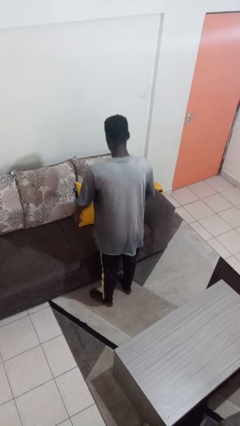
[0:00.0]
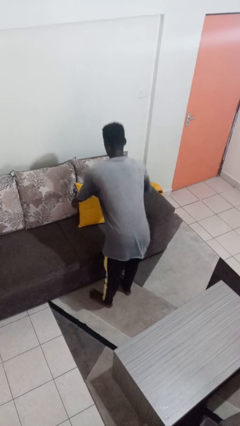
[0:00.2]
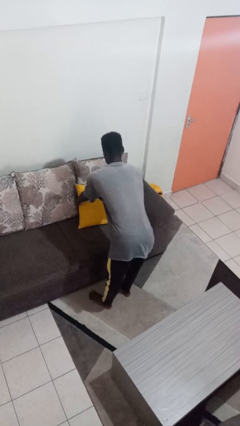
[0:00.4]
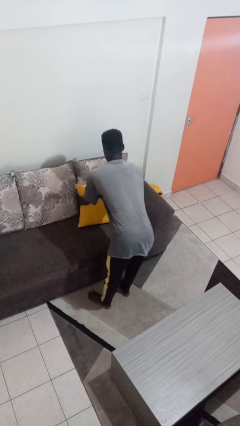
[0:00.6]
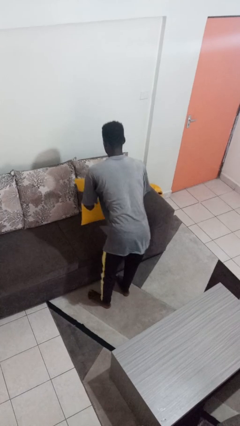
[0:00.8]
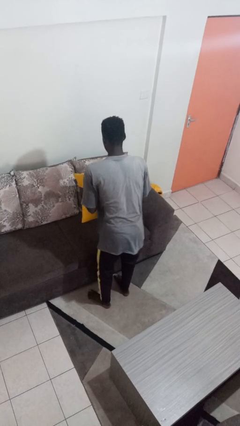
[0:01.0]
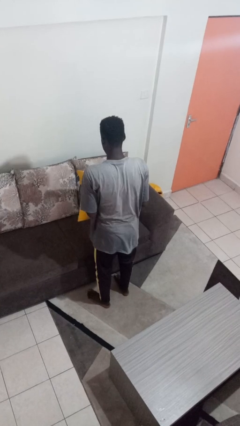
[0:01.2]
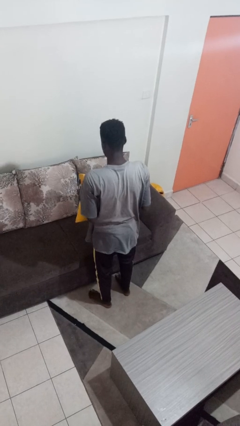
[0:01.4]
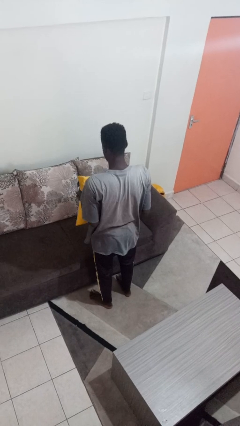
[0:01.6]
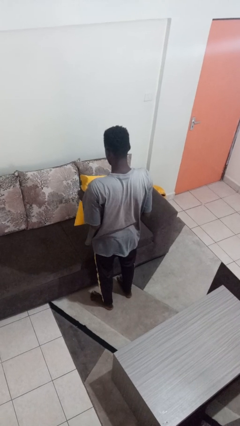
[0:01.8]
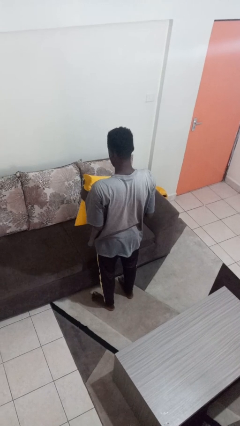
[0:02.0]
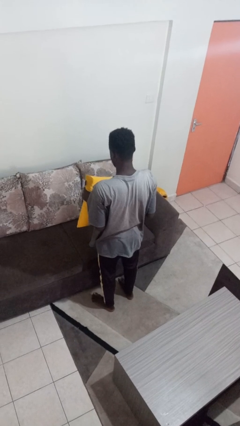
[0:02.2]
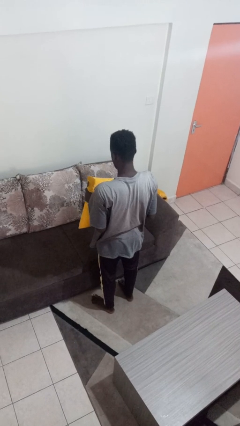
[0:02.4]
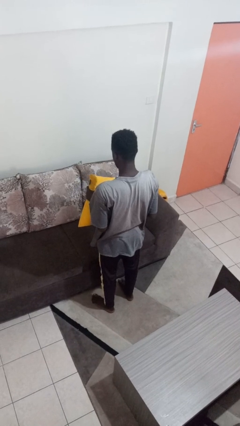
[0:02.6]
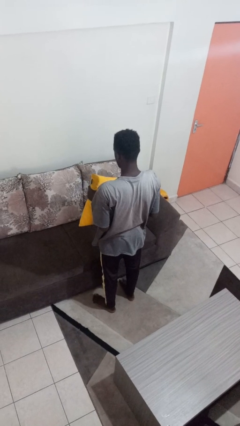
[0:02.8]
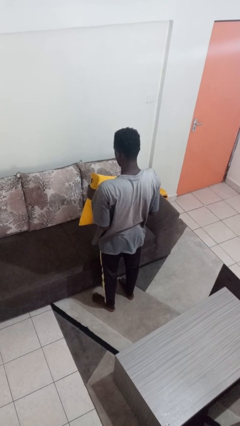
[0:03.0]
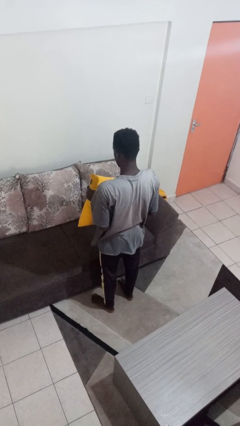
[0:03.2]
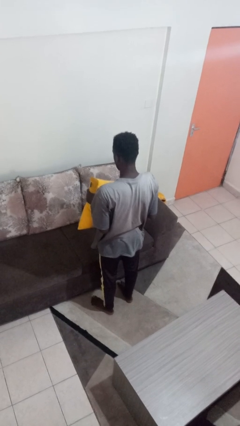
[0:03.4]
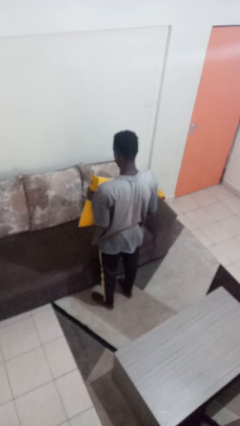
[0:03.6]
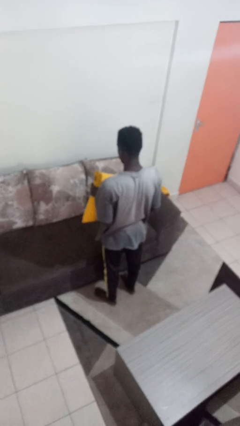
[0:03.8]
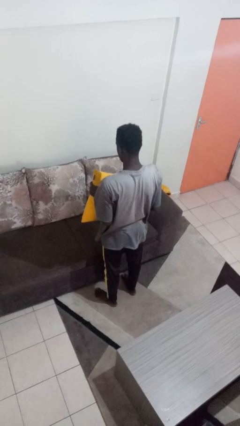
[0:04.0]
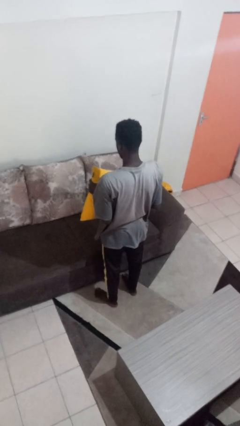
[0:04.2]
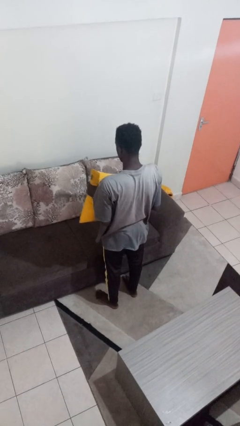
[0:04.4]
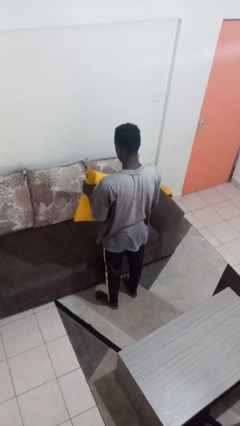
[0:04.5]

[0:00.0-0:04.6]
person picks up object from couch

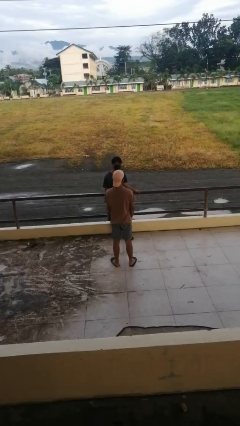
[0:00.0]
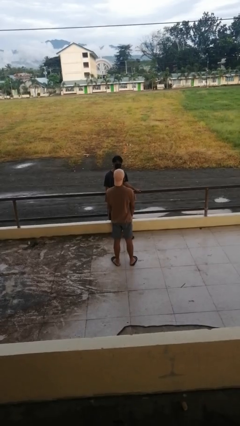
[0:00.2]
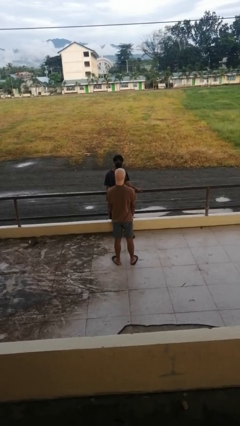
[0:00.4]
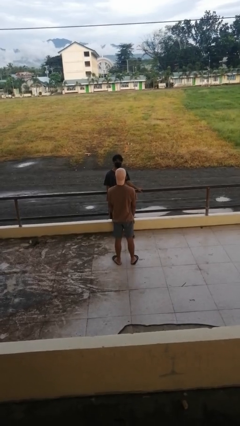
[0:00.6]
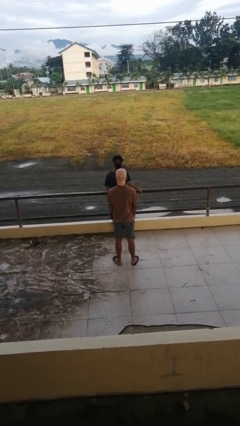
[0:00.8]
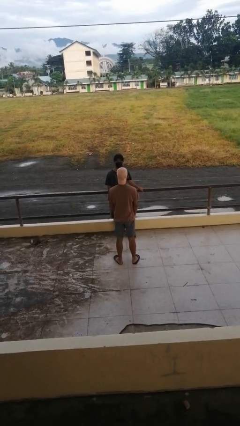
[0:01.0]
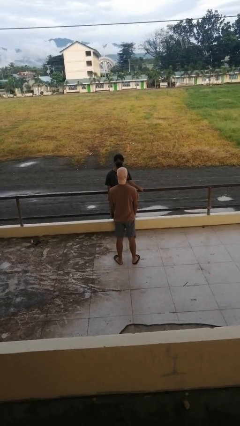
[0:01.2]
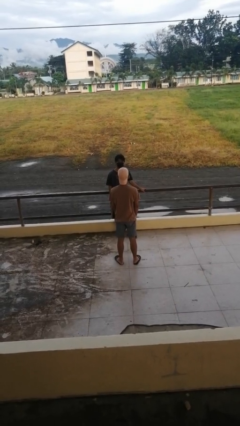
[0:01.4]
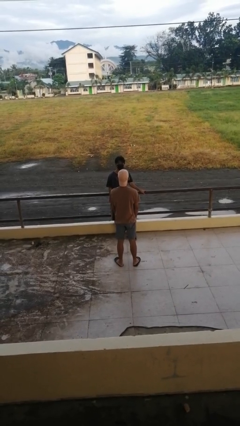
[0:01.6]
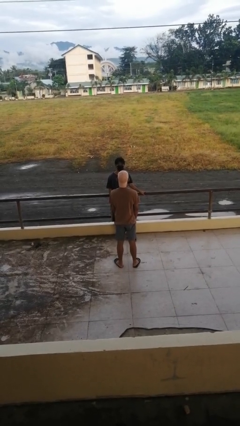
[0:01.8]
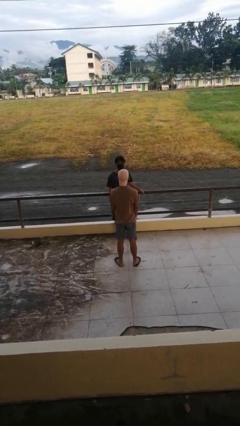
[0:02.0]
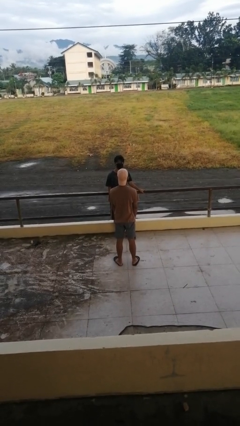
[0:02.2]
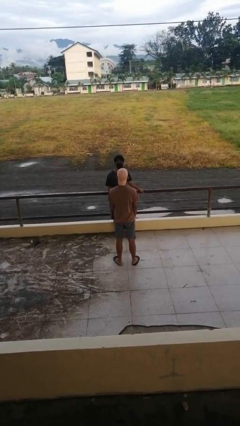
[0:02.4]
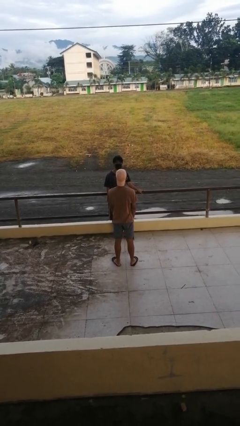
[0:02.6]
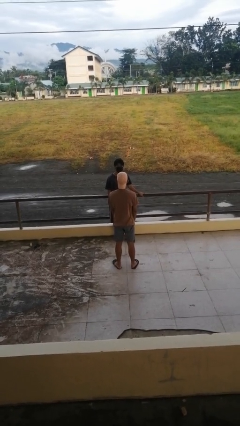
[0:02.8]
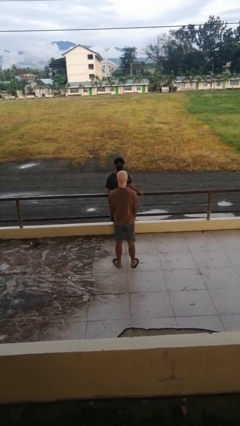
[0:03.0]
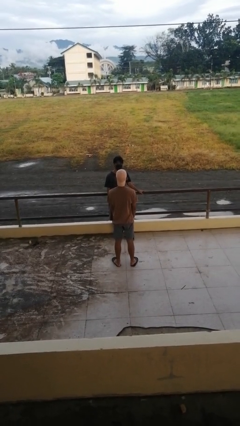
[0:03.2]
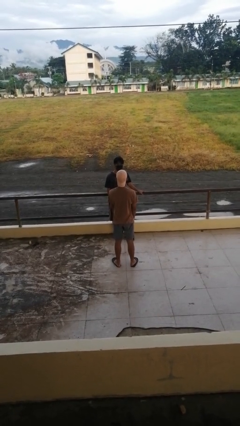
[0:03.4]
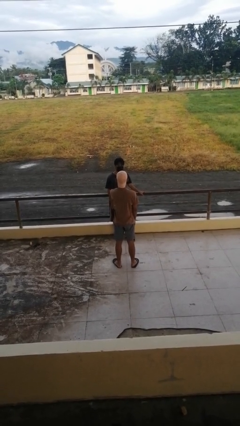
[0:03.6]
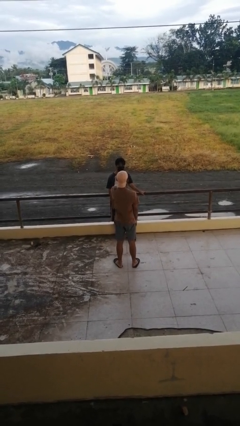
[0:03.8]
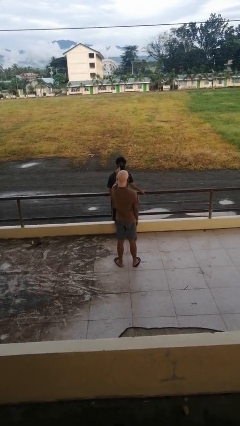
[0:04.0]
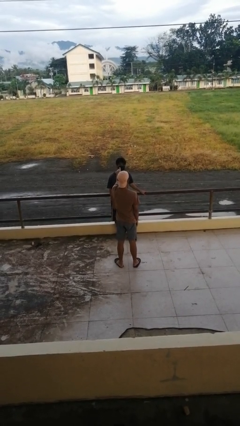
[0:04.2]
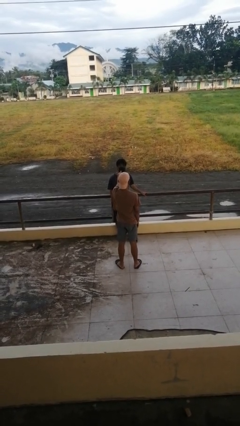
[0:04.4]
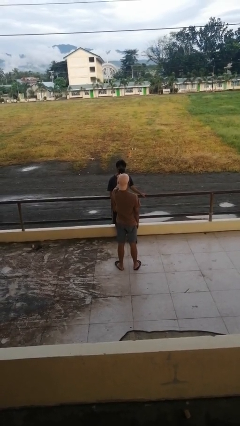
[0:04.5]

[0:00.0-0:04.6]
person points at person

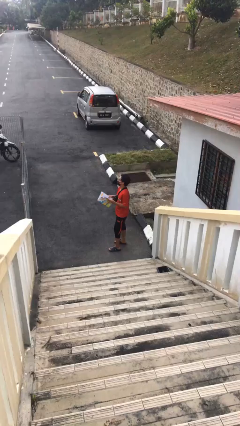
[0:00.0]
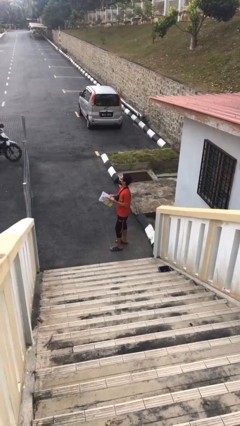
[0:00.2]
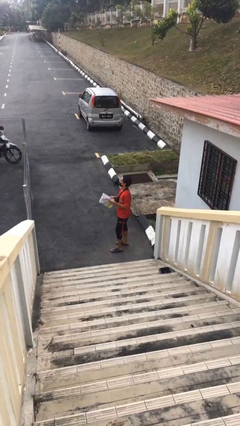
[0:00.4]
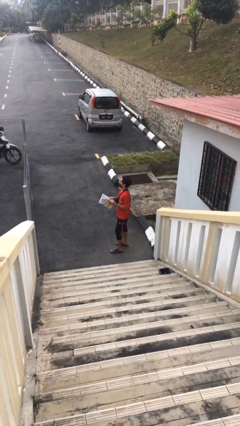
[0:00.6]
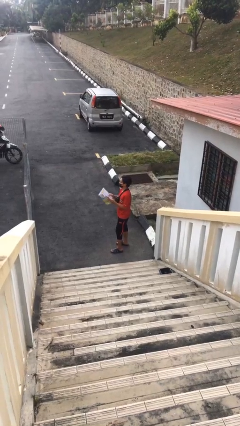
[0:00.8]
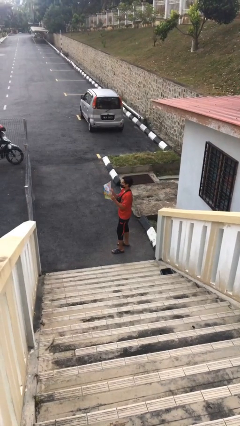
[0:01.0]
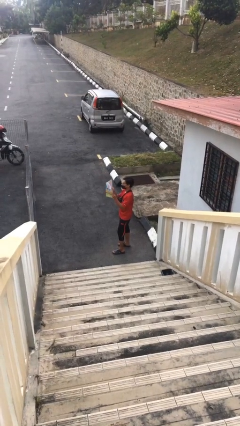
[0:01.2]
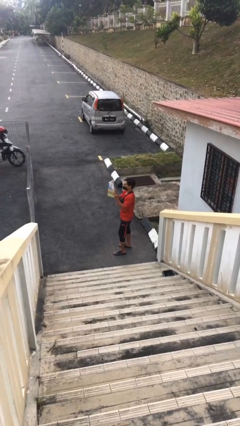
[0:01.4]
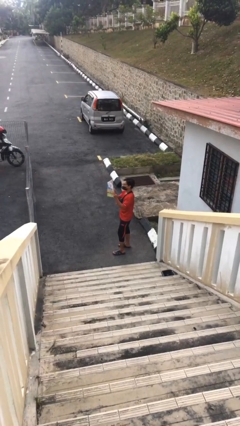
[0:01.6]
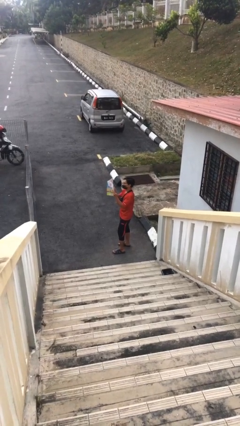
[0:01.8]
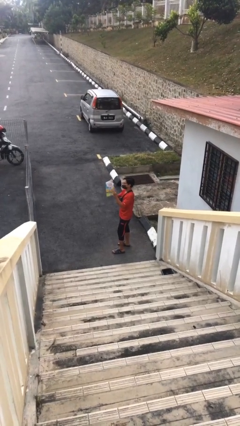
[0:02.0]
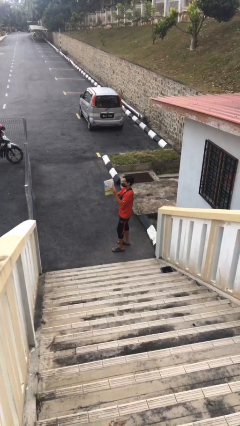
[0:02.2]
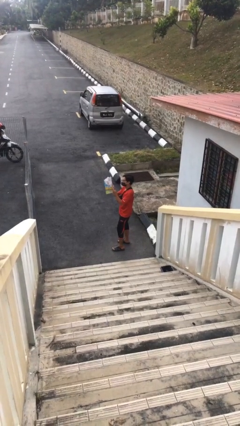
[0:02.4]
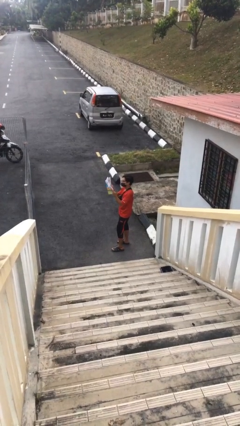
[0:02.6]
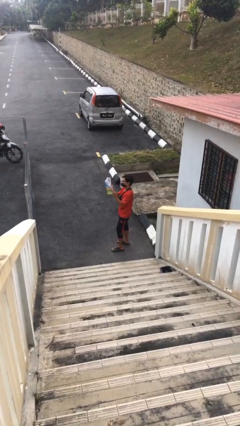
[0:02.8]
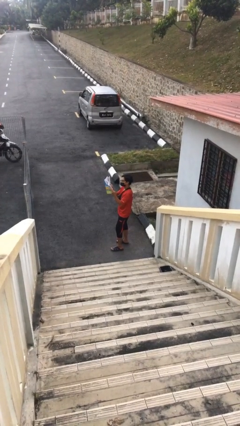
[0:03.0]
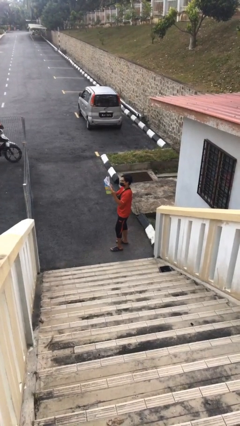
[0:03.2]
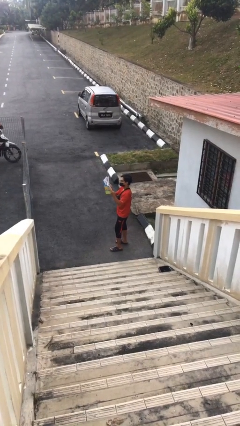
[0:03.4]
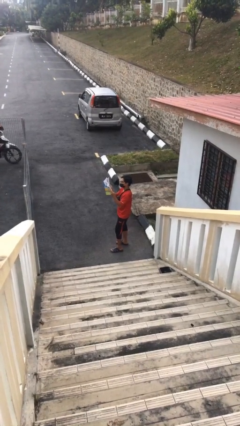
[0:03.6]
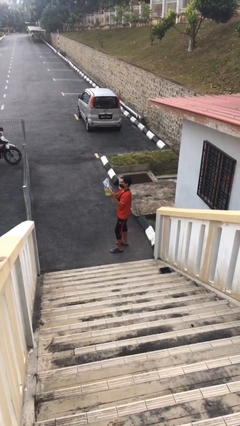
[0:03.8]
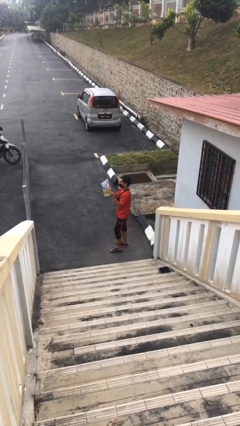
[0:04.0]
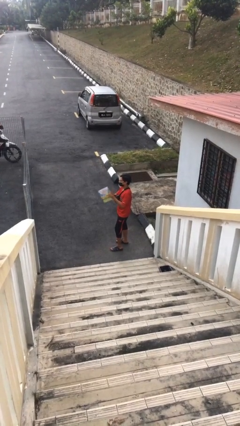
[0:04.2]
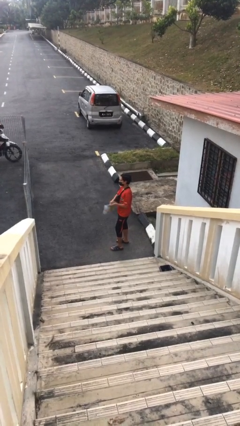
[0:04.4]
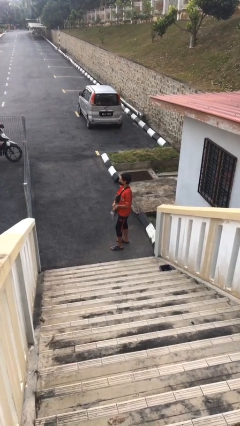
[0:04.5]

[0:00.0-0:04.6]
person reads document

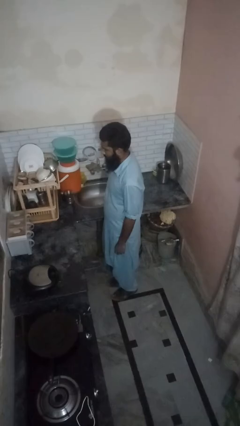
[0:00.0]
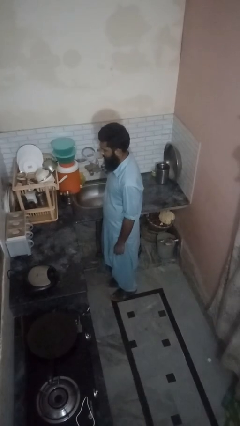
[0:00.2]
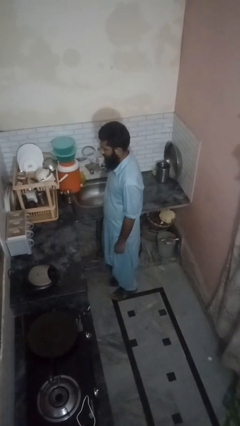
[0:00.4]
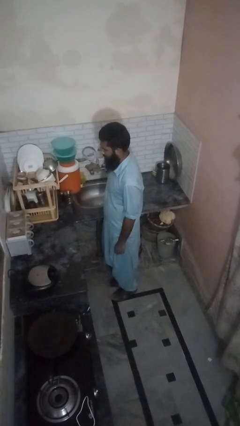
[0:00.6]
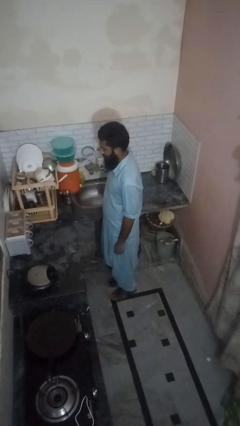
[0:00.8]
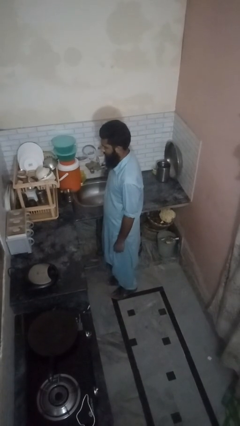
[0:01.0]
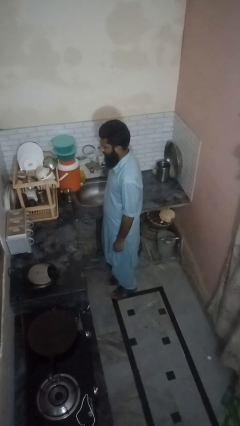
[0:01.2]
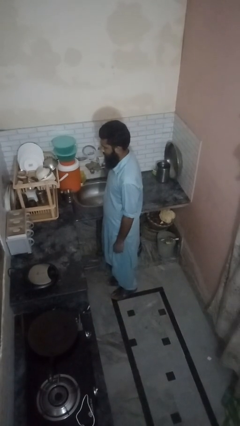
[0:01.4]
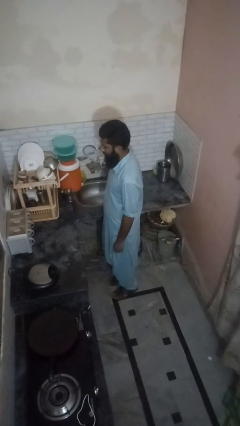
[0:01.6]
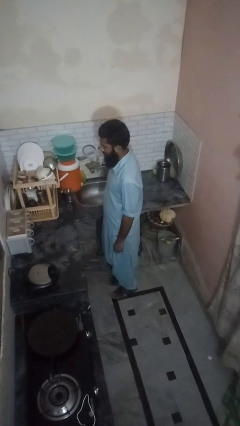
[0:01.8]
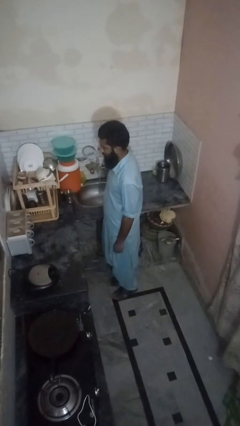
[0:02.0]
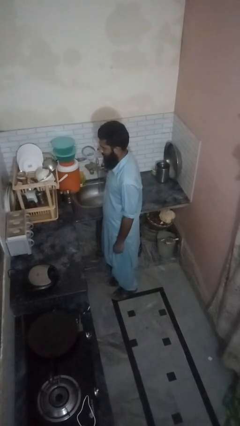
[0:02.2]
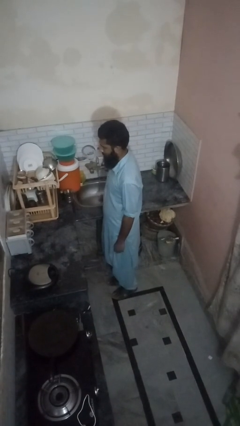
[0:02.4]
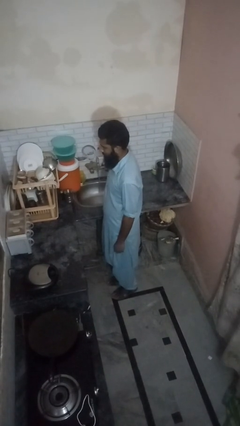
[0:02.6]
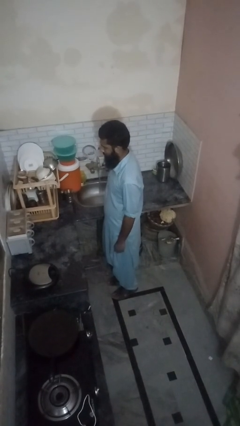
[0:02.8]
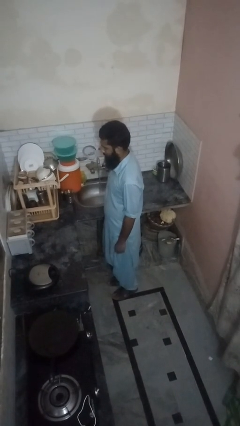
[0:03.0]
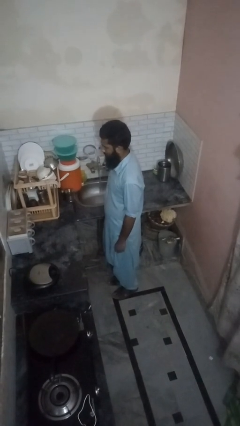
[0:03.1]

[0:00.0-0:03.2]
person turns on faucet

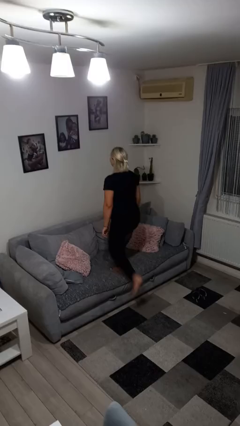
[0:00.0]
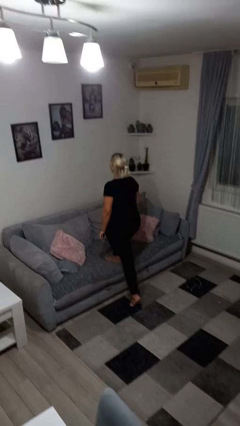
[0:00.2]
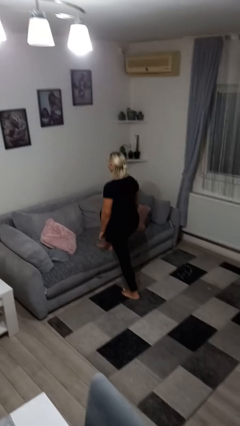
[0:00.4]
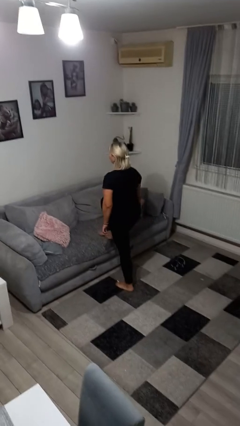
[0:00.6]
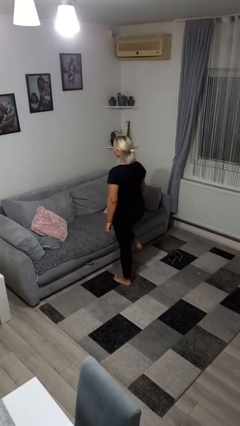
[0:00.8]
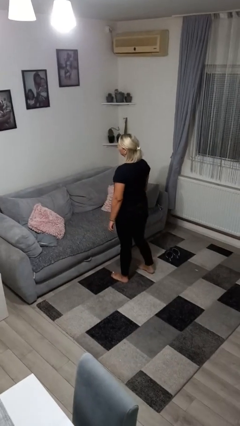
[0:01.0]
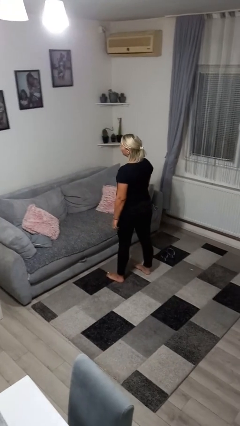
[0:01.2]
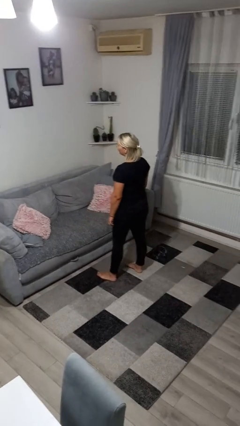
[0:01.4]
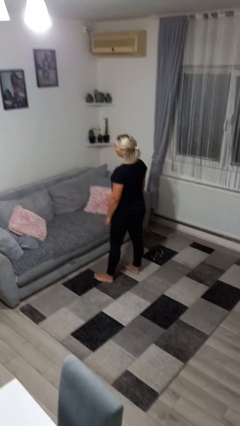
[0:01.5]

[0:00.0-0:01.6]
person climbs off couch
